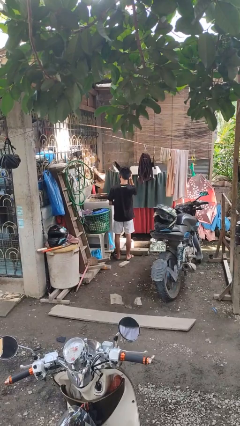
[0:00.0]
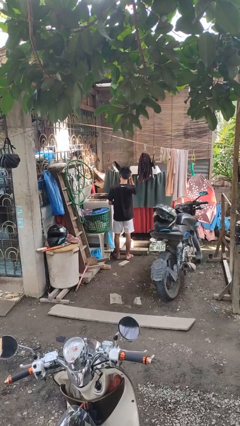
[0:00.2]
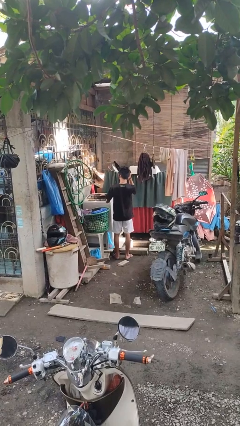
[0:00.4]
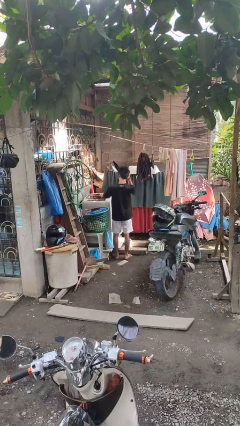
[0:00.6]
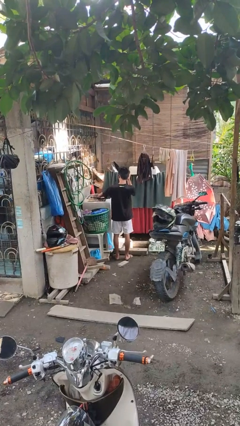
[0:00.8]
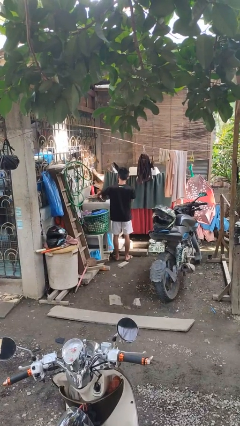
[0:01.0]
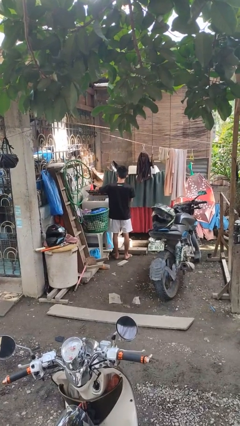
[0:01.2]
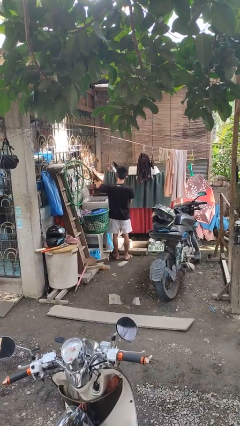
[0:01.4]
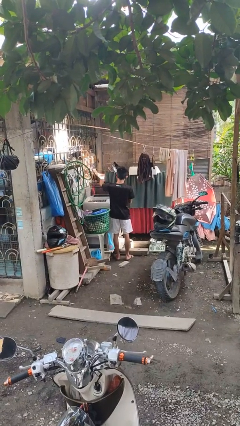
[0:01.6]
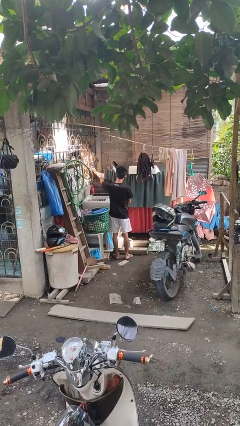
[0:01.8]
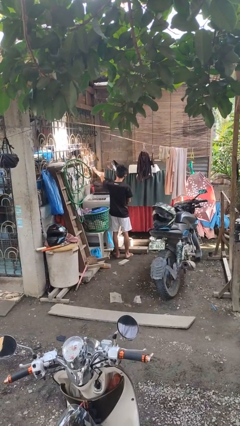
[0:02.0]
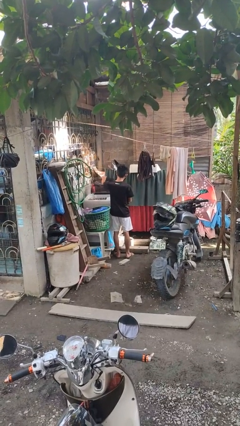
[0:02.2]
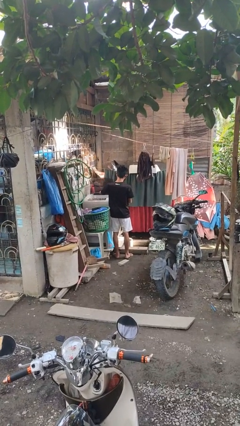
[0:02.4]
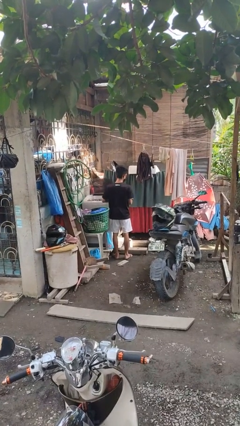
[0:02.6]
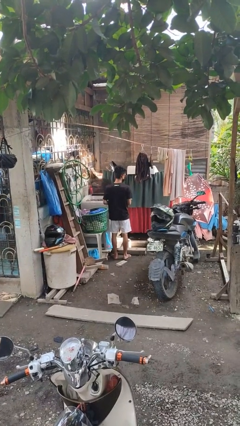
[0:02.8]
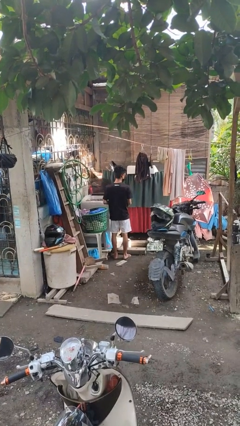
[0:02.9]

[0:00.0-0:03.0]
person opens clothes washer

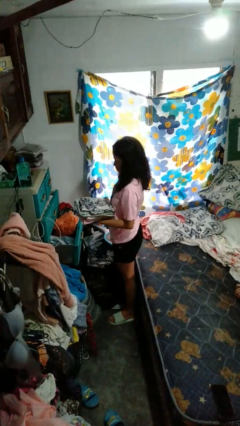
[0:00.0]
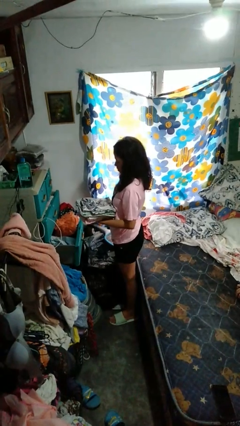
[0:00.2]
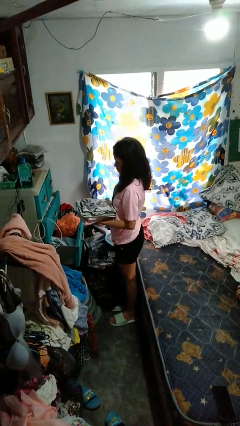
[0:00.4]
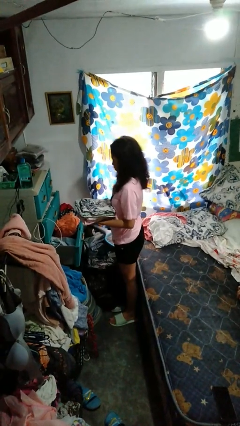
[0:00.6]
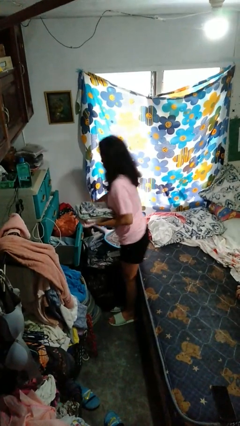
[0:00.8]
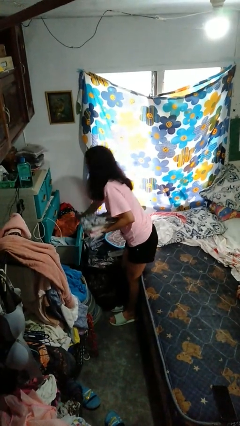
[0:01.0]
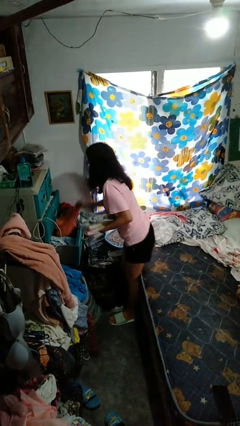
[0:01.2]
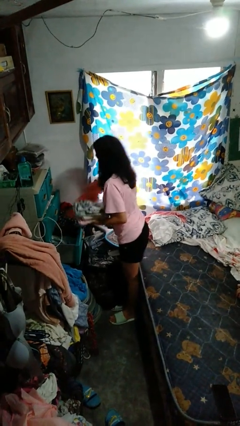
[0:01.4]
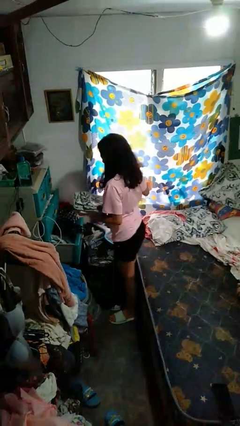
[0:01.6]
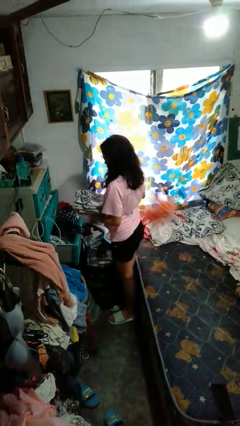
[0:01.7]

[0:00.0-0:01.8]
person takes clothes from dresser

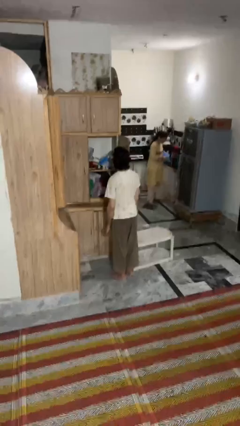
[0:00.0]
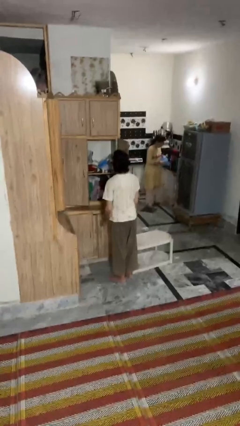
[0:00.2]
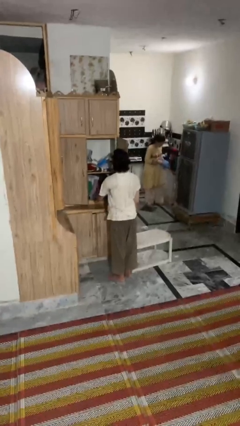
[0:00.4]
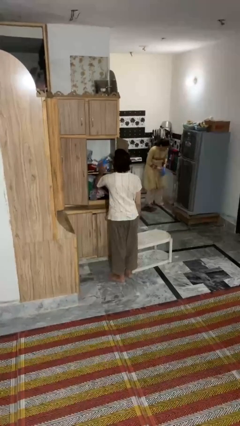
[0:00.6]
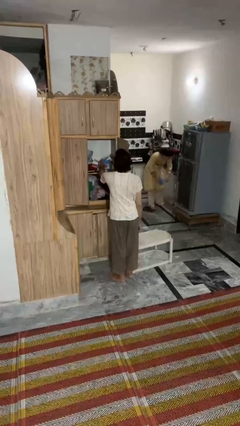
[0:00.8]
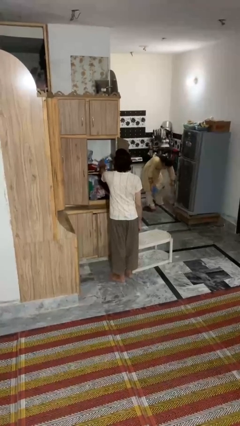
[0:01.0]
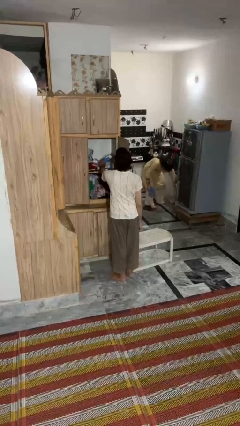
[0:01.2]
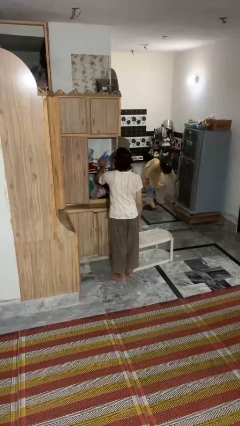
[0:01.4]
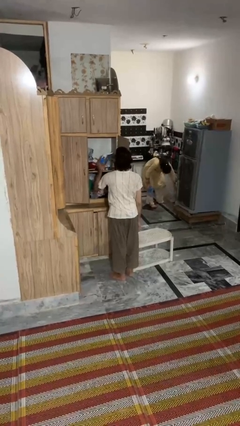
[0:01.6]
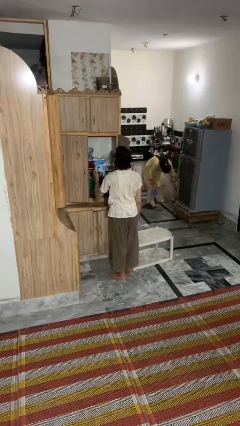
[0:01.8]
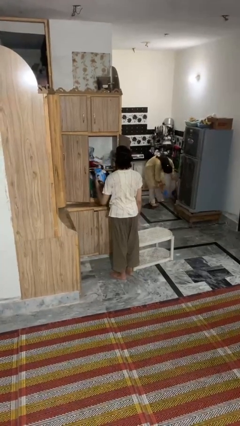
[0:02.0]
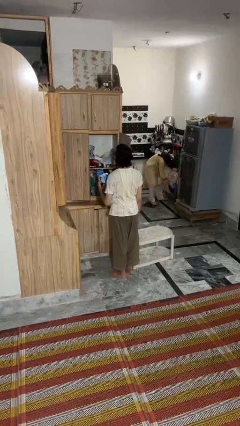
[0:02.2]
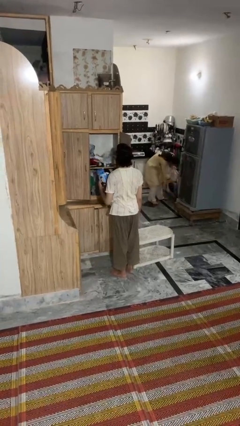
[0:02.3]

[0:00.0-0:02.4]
person picks up object from cabinet

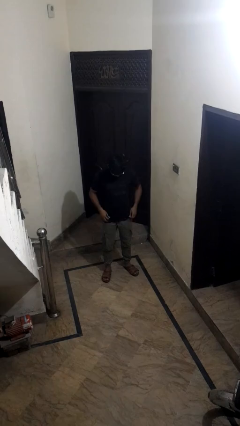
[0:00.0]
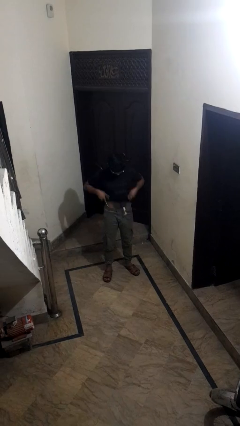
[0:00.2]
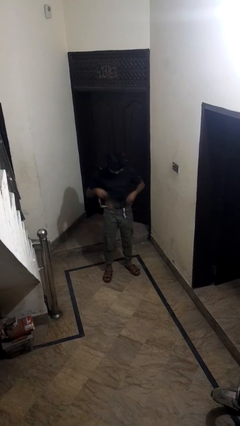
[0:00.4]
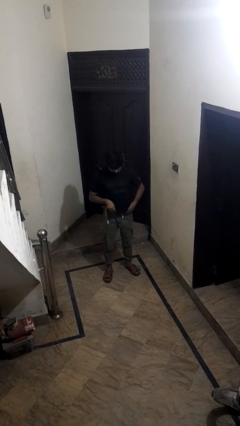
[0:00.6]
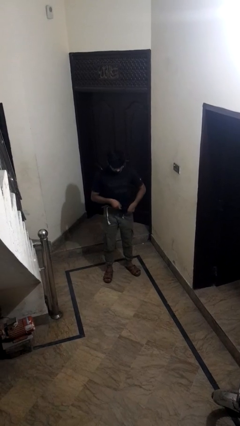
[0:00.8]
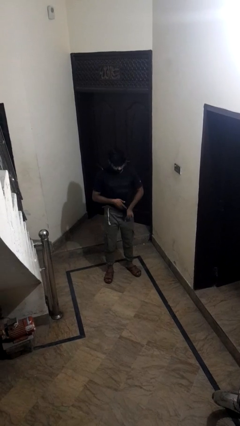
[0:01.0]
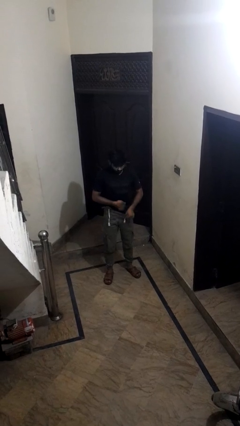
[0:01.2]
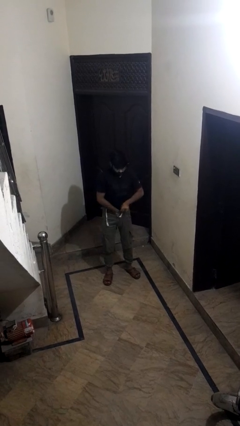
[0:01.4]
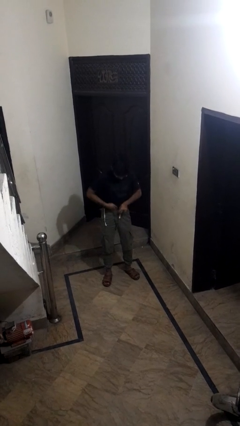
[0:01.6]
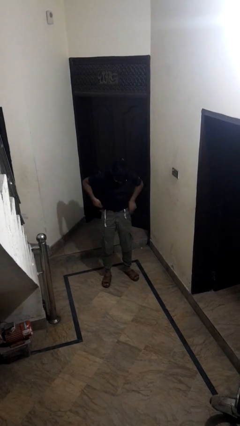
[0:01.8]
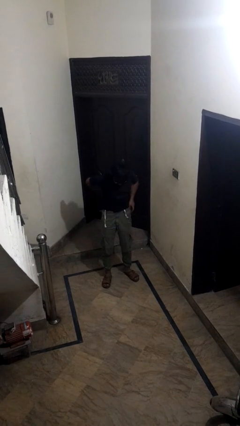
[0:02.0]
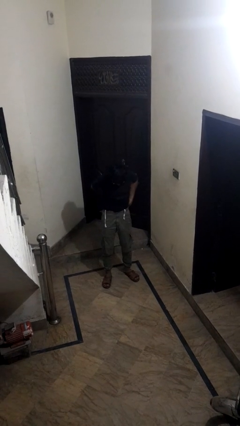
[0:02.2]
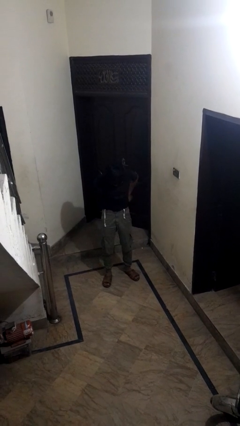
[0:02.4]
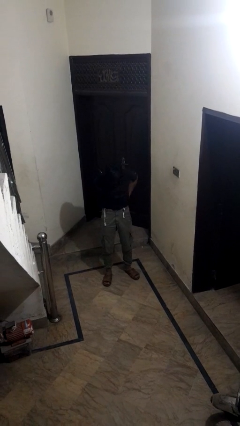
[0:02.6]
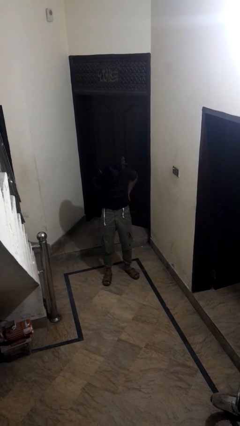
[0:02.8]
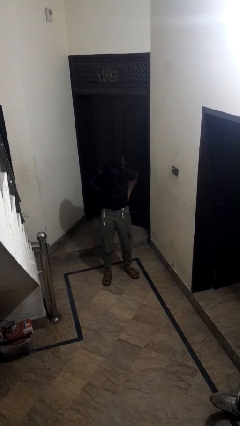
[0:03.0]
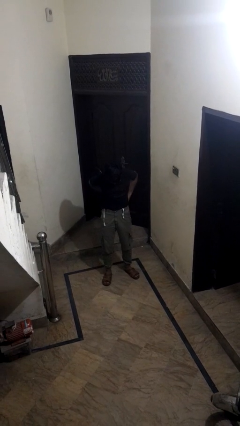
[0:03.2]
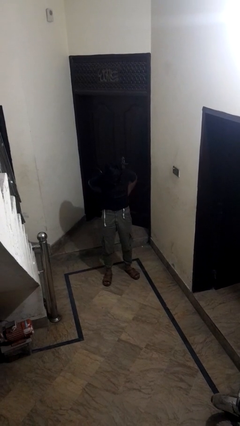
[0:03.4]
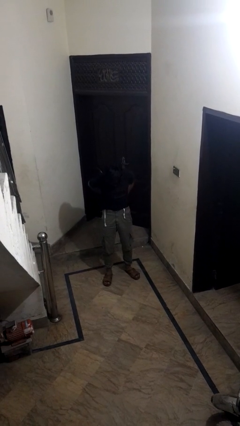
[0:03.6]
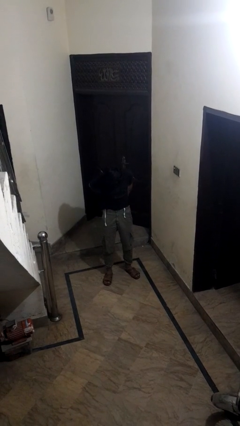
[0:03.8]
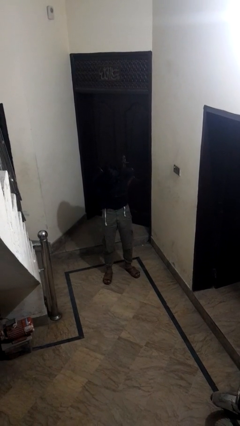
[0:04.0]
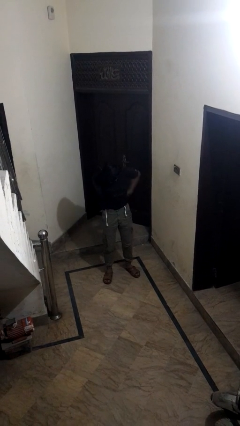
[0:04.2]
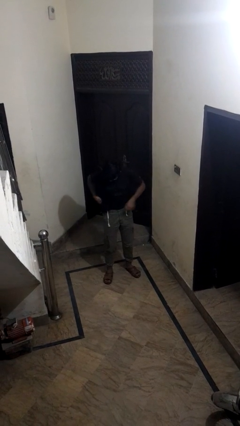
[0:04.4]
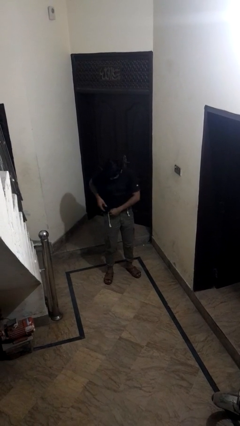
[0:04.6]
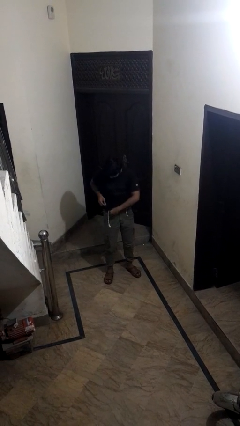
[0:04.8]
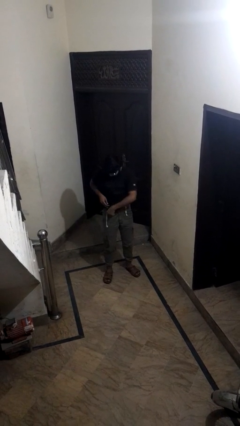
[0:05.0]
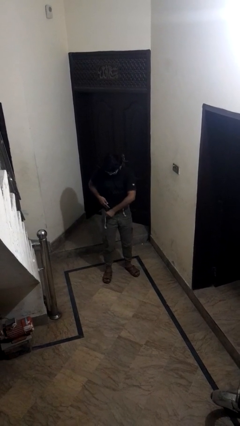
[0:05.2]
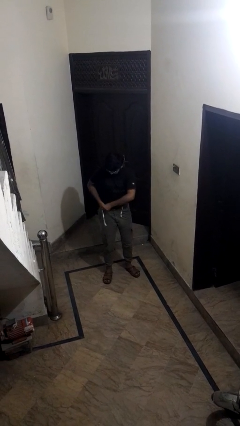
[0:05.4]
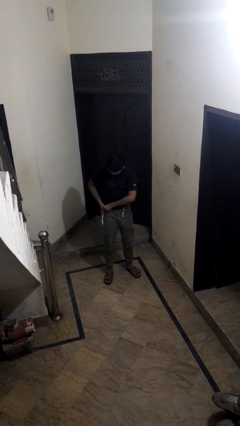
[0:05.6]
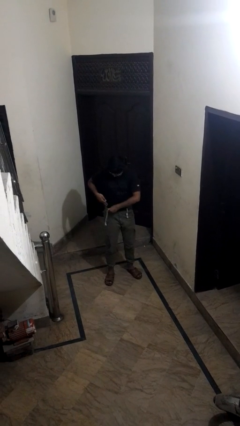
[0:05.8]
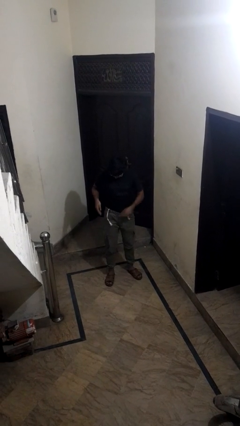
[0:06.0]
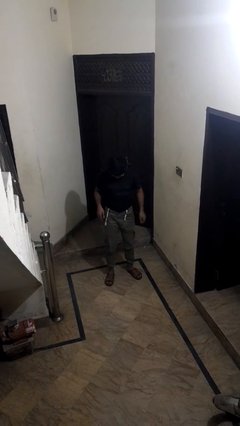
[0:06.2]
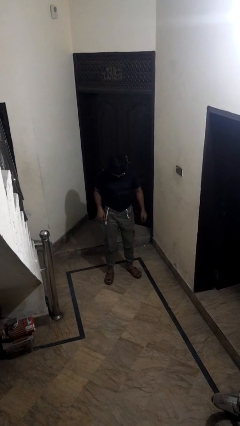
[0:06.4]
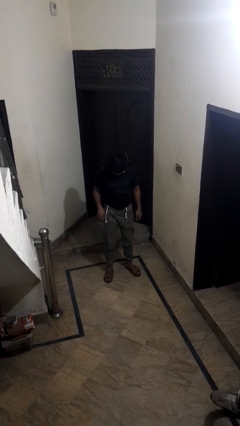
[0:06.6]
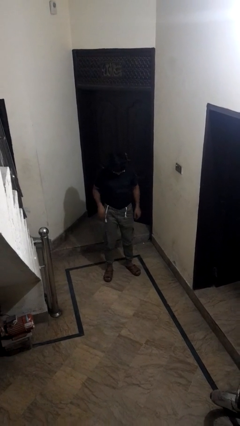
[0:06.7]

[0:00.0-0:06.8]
person tucks in shirt

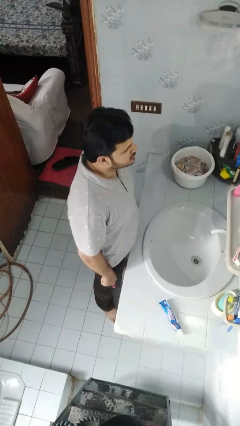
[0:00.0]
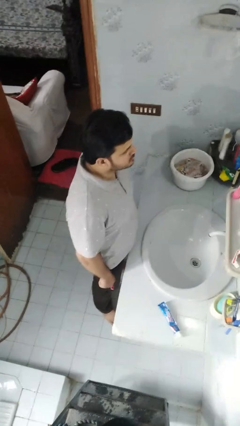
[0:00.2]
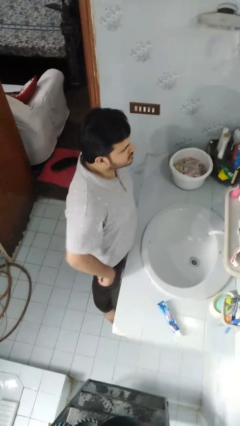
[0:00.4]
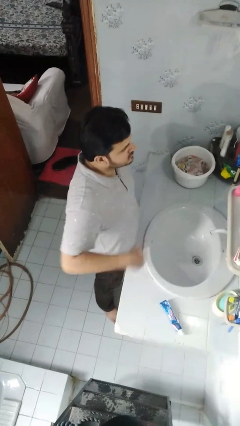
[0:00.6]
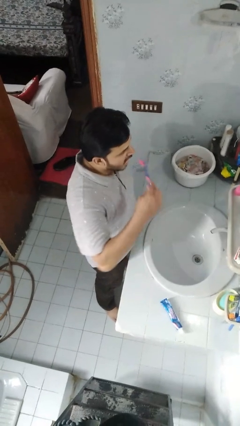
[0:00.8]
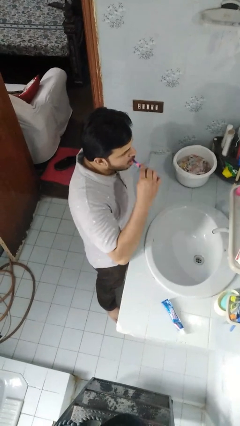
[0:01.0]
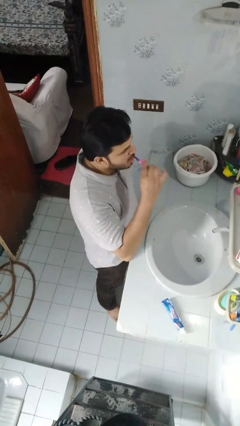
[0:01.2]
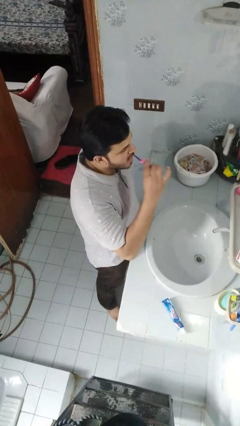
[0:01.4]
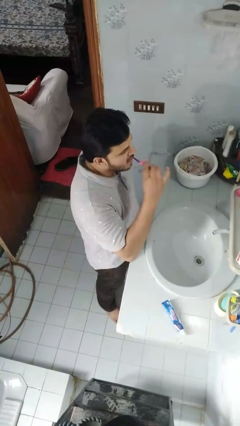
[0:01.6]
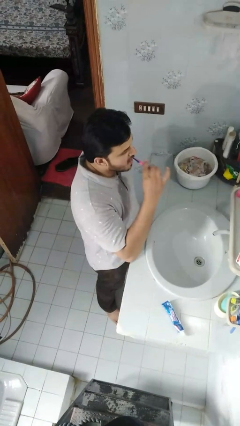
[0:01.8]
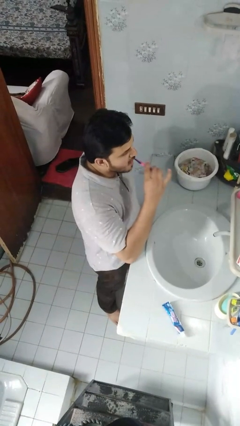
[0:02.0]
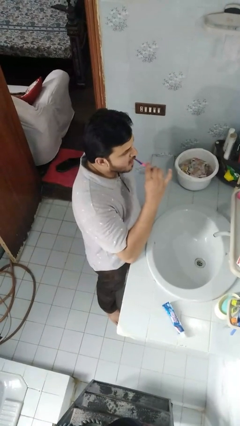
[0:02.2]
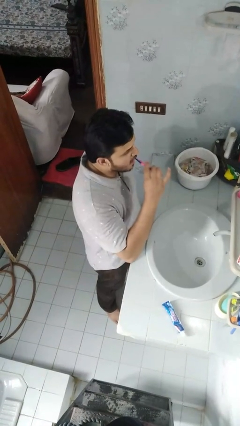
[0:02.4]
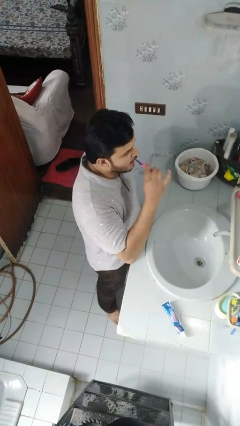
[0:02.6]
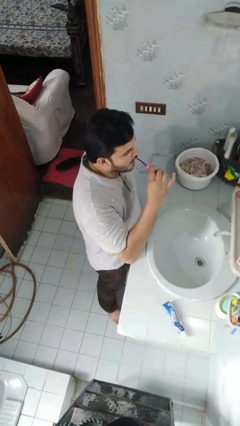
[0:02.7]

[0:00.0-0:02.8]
person brushes teeth

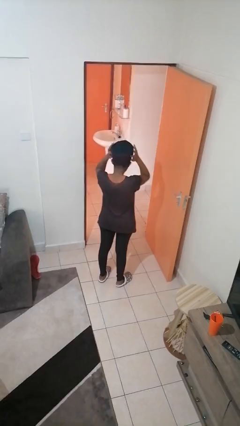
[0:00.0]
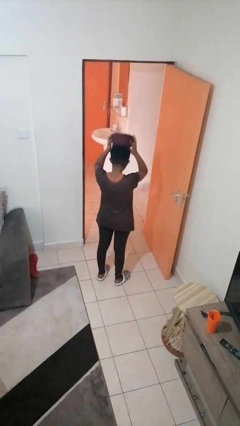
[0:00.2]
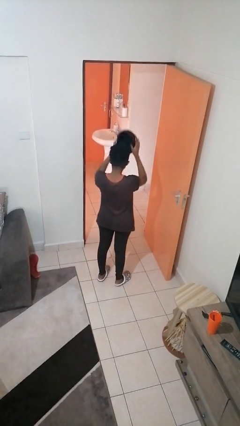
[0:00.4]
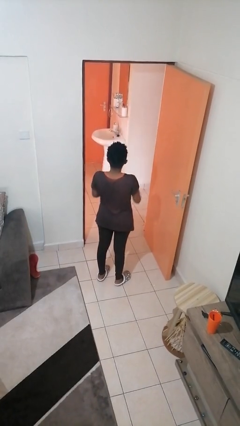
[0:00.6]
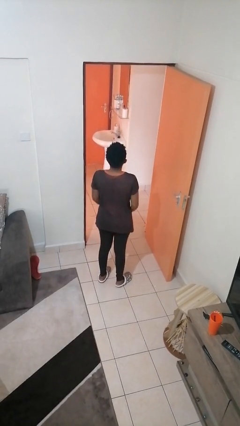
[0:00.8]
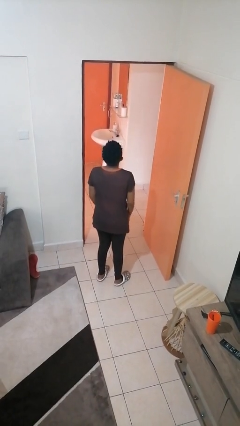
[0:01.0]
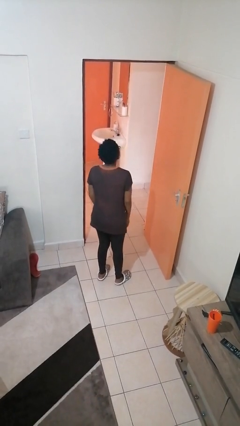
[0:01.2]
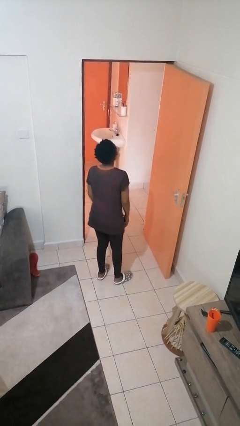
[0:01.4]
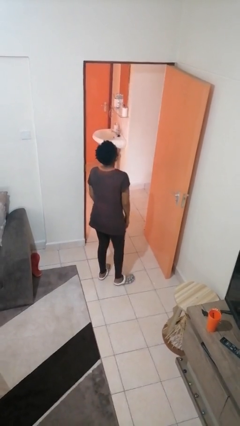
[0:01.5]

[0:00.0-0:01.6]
person takes off hat
